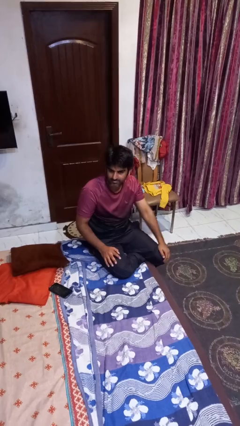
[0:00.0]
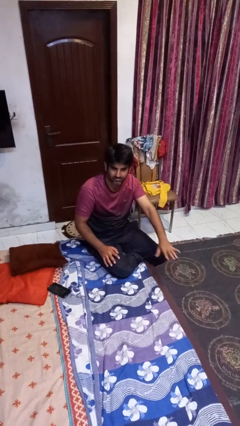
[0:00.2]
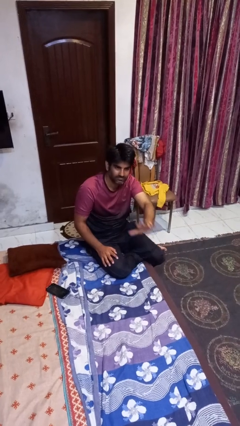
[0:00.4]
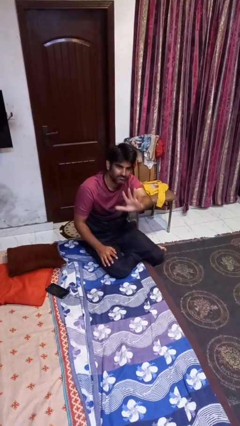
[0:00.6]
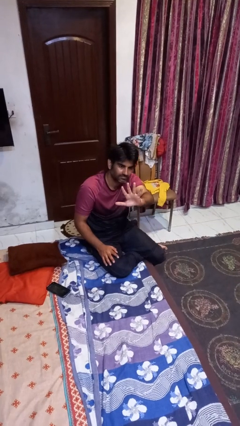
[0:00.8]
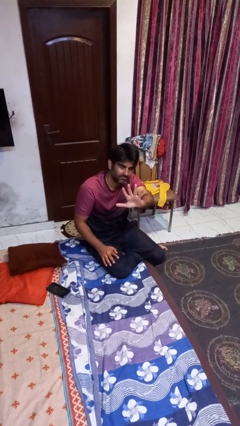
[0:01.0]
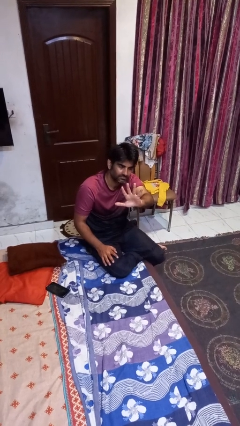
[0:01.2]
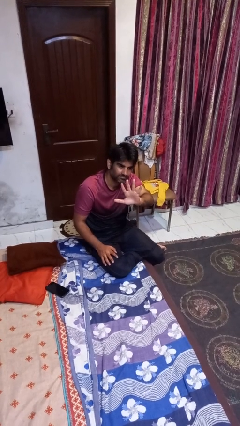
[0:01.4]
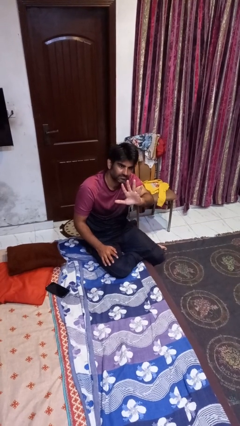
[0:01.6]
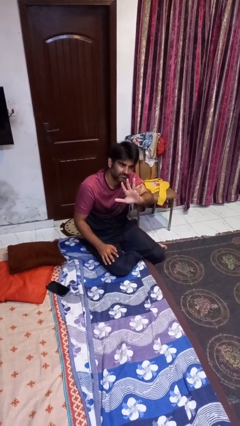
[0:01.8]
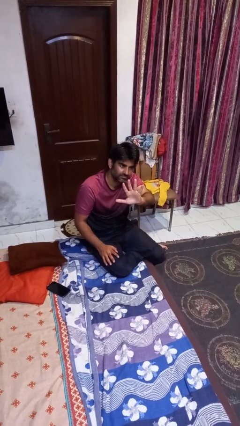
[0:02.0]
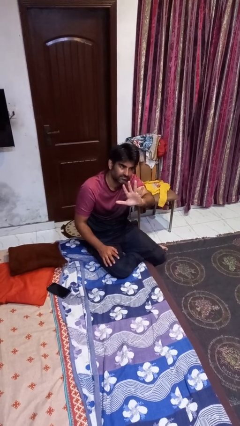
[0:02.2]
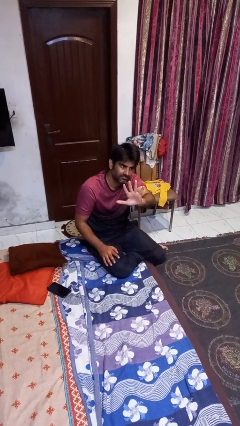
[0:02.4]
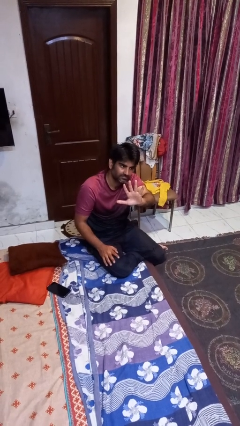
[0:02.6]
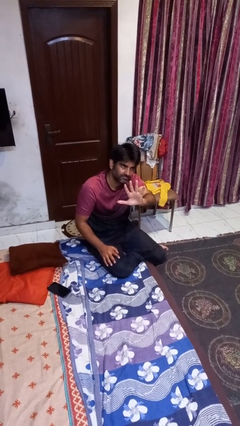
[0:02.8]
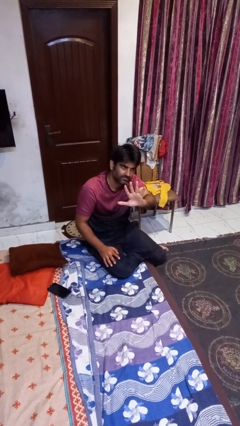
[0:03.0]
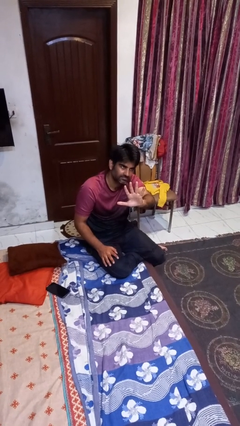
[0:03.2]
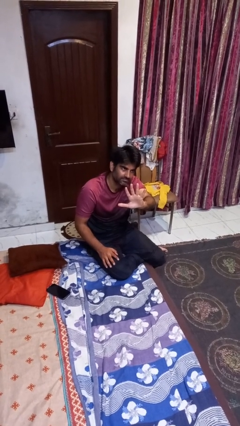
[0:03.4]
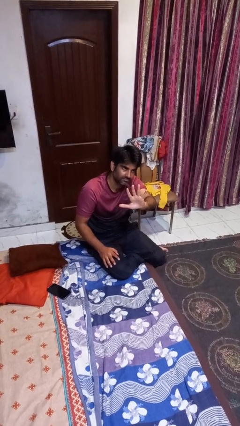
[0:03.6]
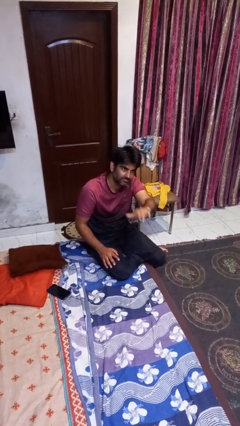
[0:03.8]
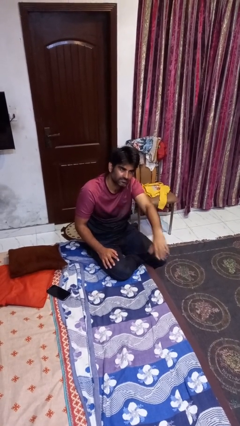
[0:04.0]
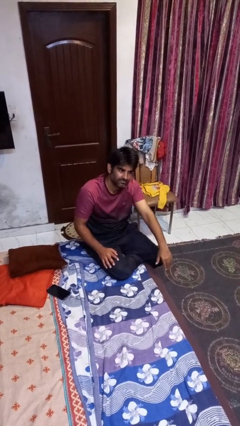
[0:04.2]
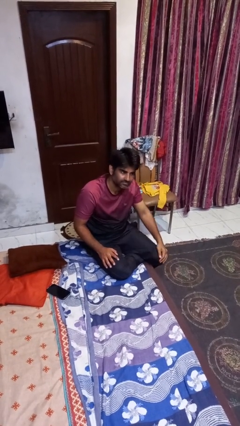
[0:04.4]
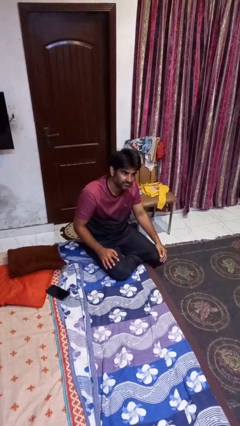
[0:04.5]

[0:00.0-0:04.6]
person gestures number five

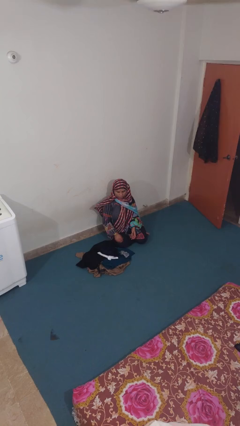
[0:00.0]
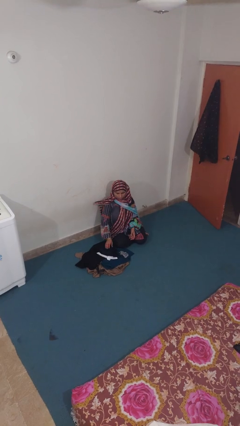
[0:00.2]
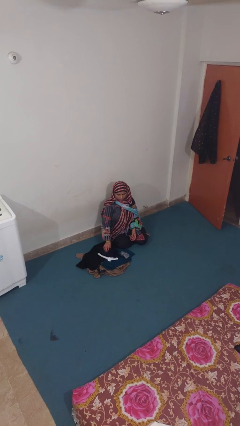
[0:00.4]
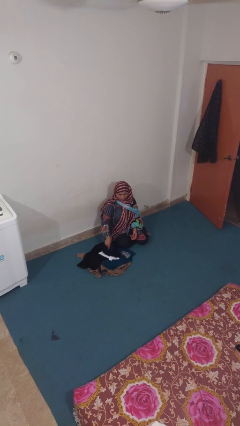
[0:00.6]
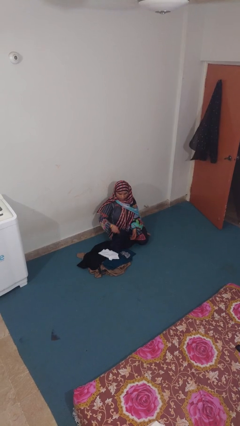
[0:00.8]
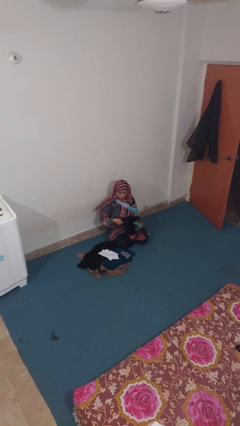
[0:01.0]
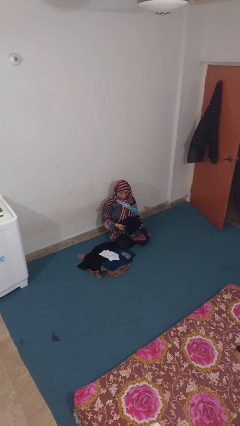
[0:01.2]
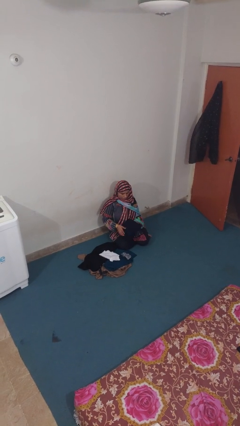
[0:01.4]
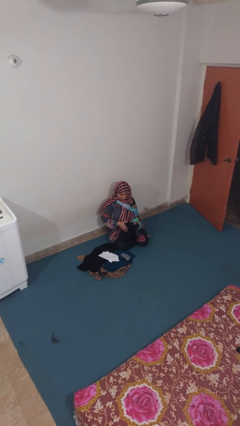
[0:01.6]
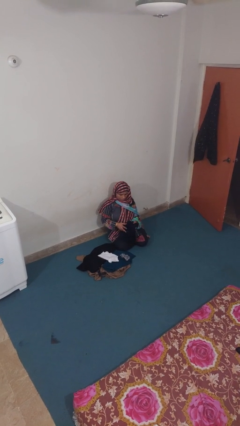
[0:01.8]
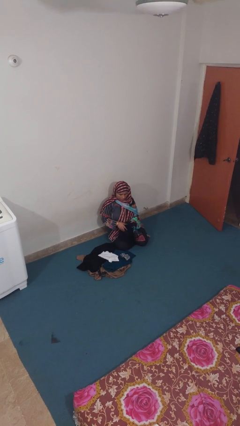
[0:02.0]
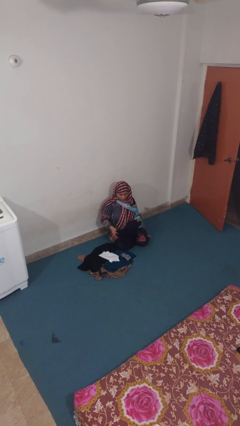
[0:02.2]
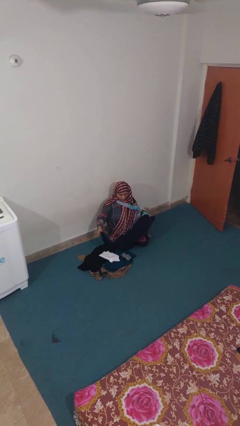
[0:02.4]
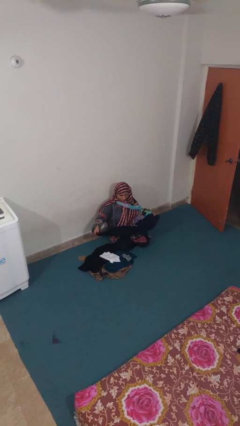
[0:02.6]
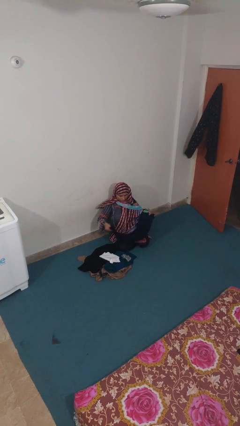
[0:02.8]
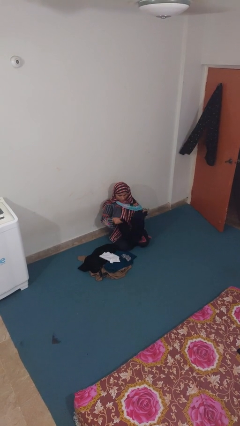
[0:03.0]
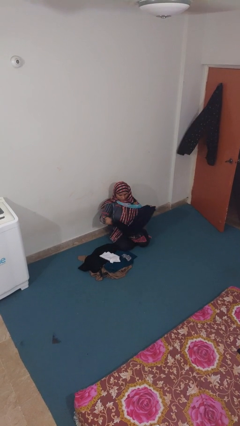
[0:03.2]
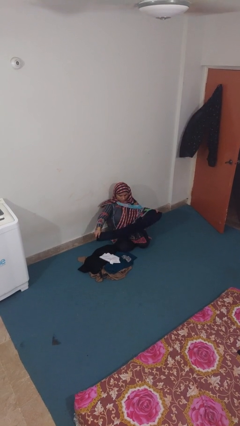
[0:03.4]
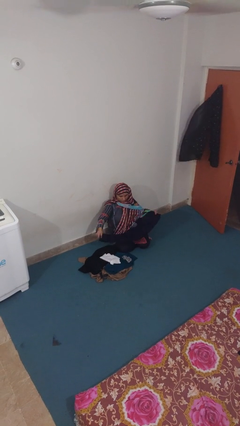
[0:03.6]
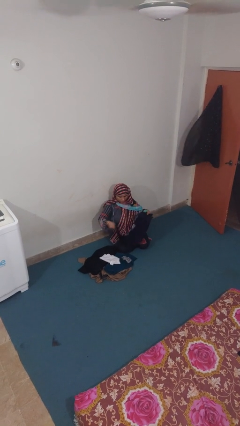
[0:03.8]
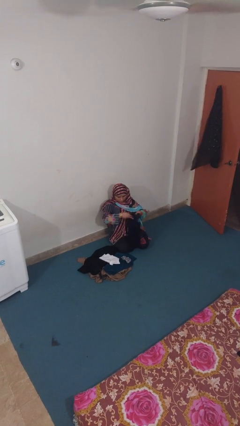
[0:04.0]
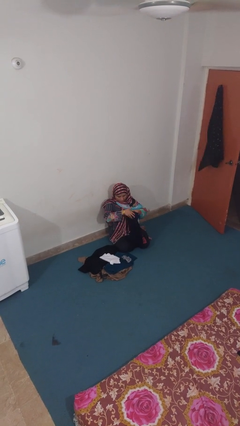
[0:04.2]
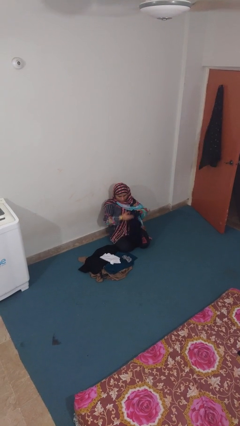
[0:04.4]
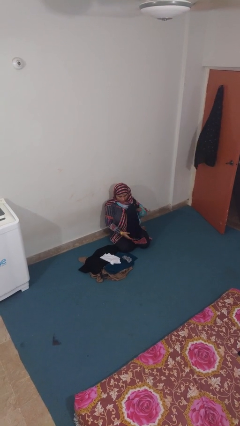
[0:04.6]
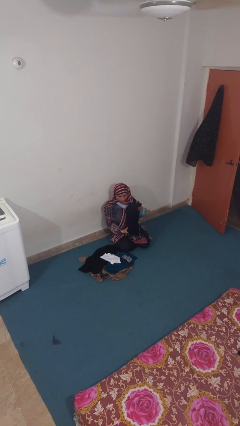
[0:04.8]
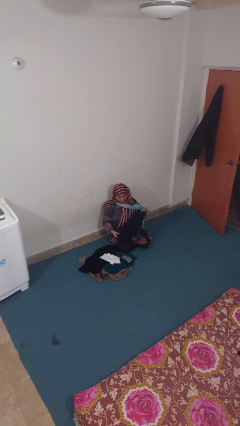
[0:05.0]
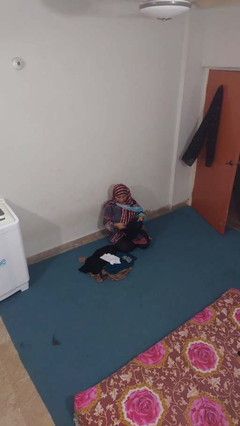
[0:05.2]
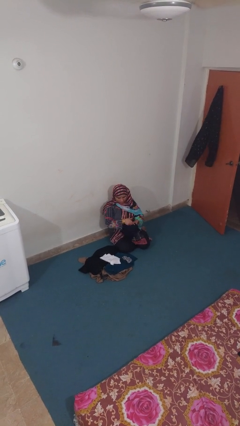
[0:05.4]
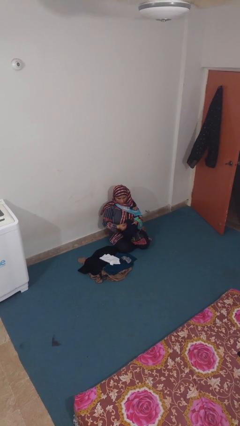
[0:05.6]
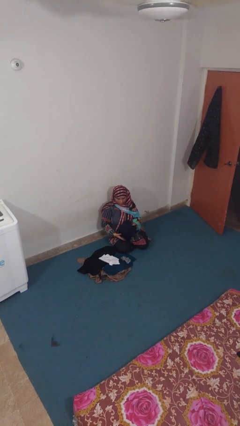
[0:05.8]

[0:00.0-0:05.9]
person folds pants

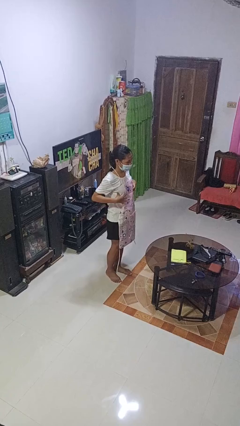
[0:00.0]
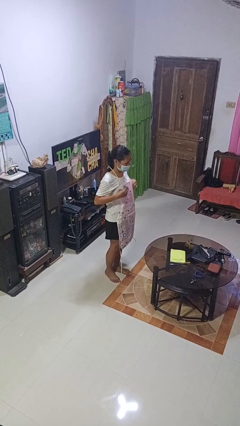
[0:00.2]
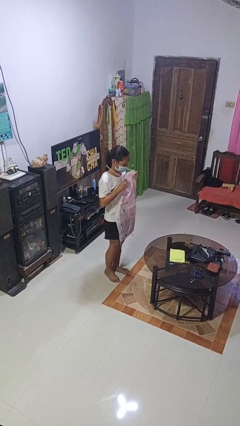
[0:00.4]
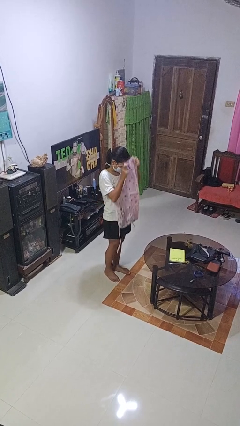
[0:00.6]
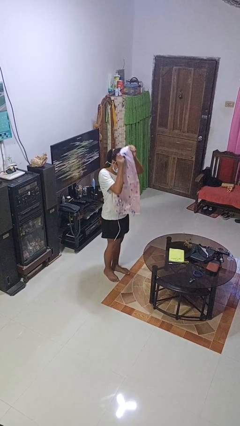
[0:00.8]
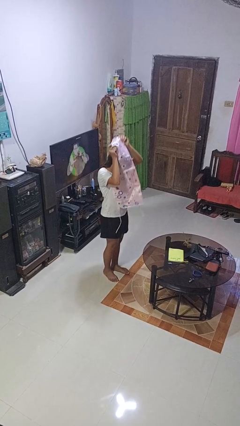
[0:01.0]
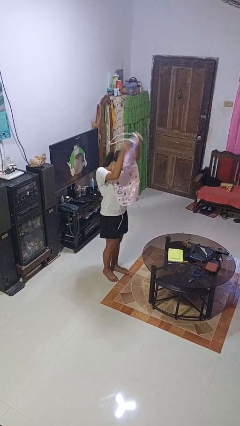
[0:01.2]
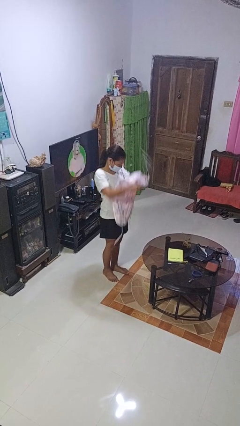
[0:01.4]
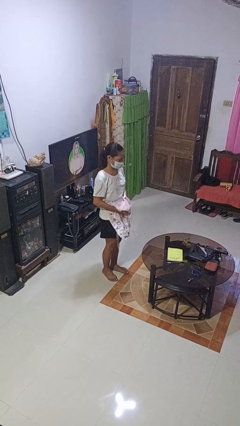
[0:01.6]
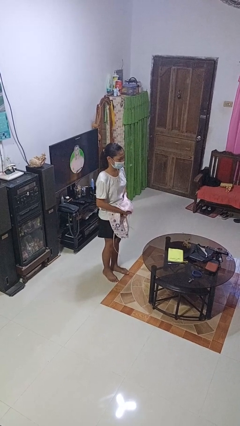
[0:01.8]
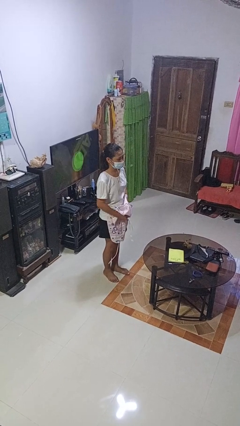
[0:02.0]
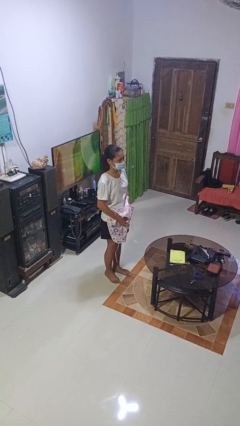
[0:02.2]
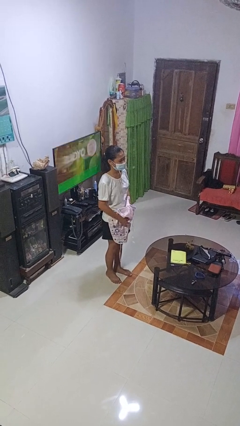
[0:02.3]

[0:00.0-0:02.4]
person takes off apron

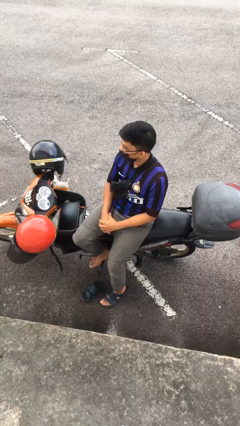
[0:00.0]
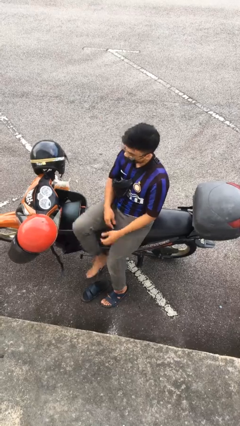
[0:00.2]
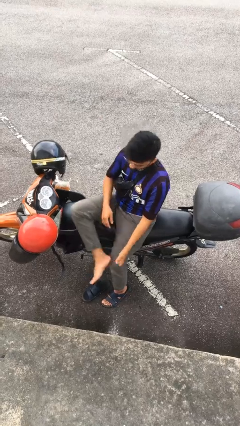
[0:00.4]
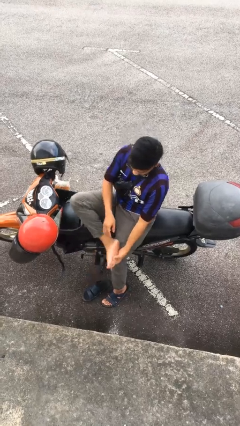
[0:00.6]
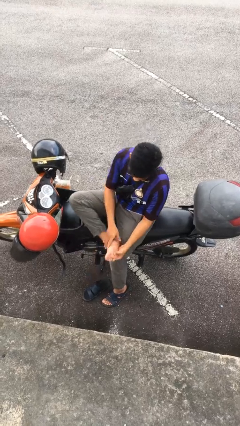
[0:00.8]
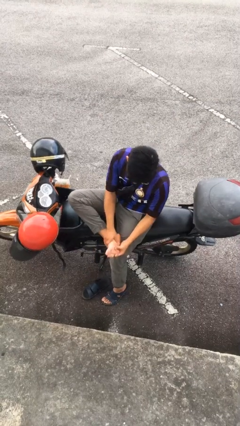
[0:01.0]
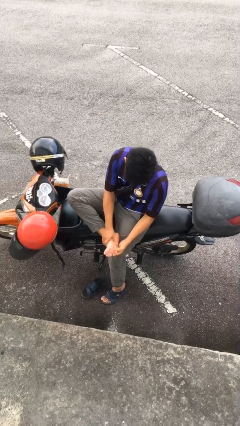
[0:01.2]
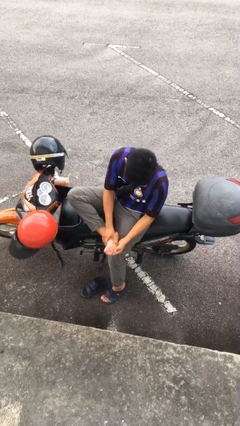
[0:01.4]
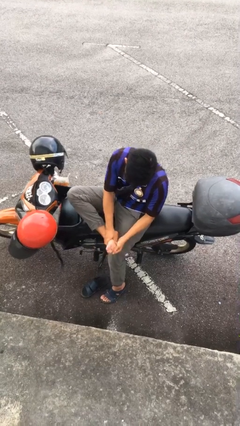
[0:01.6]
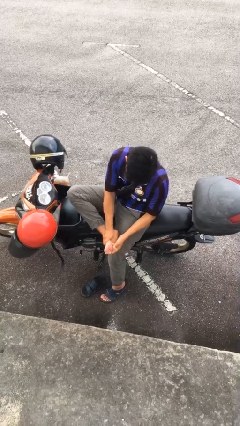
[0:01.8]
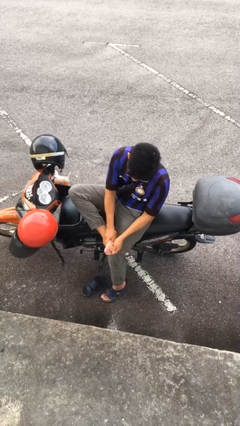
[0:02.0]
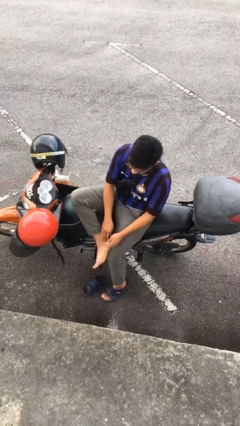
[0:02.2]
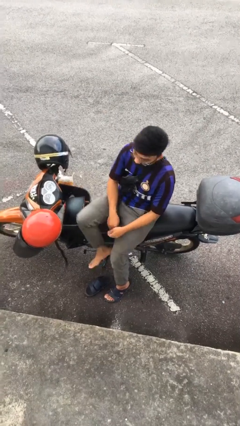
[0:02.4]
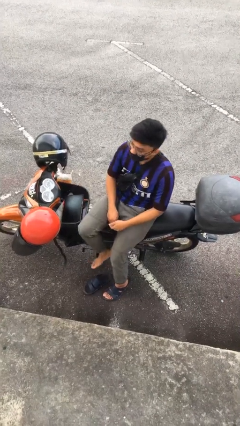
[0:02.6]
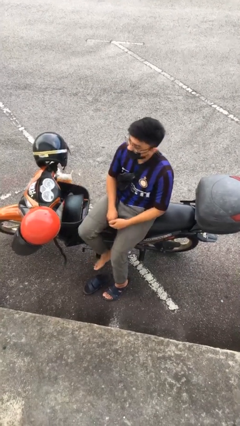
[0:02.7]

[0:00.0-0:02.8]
person rubs foot

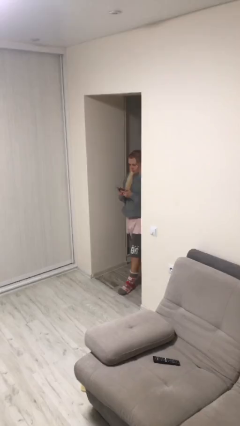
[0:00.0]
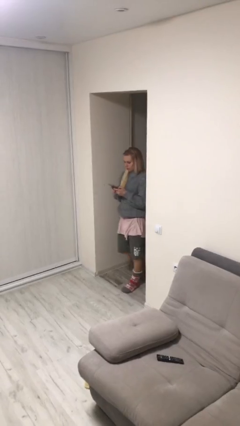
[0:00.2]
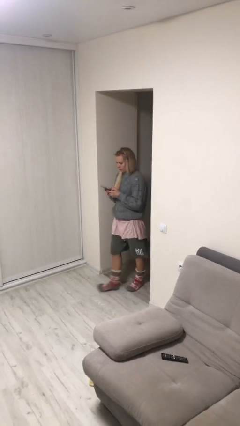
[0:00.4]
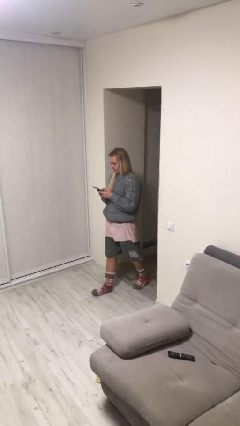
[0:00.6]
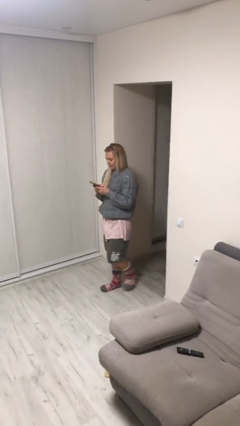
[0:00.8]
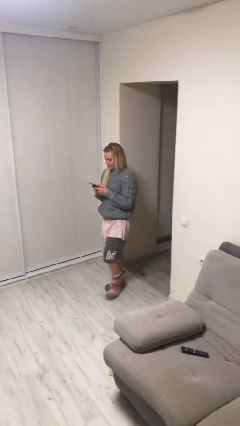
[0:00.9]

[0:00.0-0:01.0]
person enters scene through structure

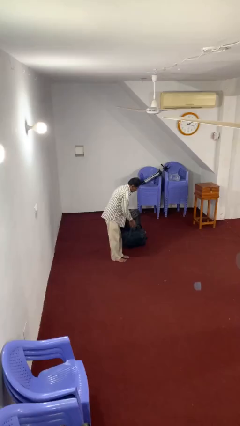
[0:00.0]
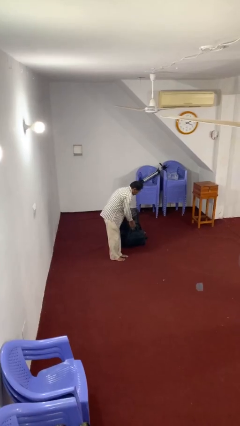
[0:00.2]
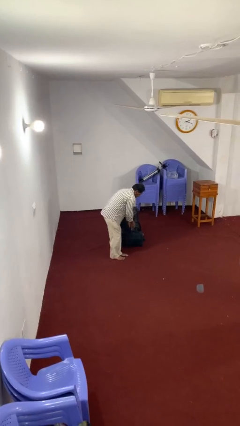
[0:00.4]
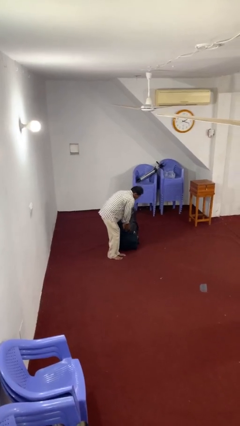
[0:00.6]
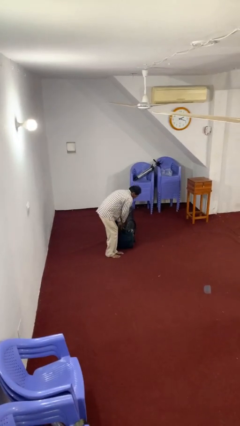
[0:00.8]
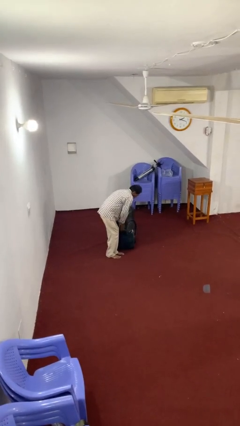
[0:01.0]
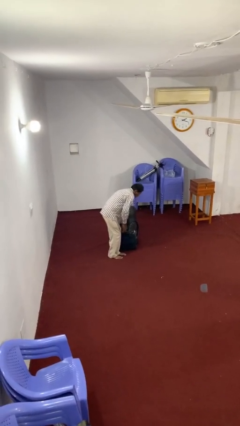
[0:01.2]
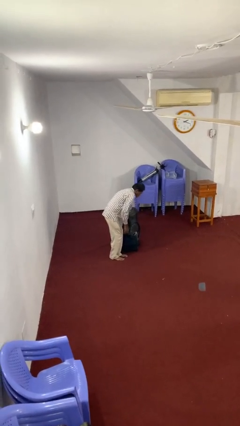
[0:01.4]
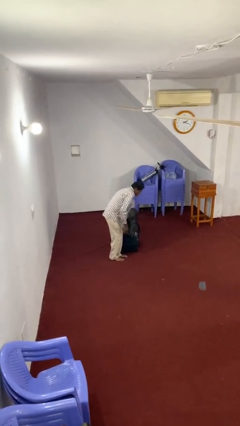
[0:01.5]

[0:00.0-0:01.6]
person puts down object on floor
